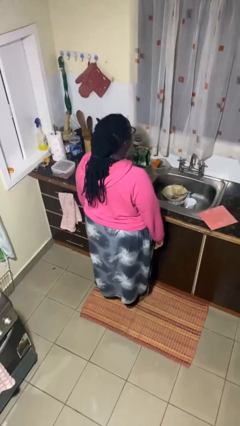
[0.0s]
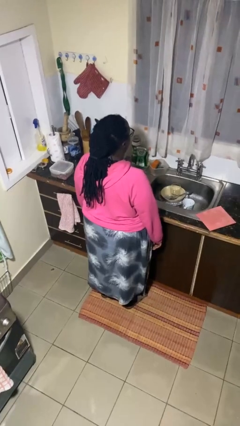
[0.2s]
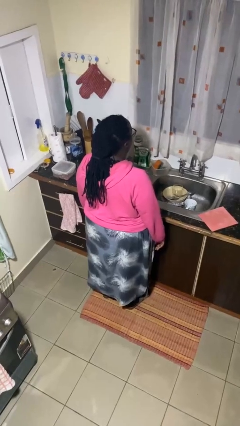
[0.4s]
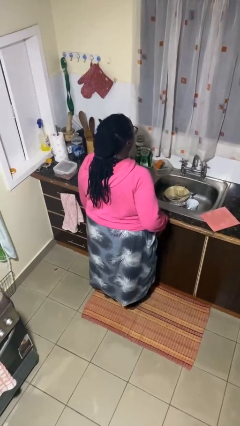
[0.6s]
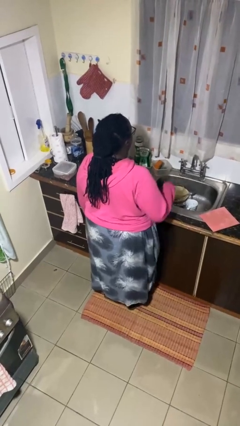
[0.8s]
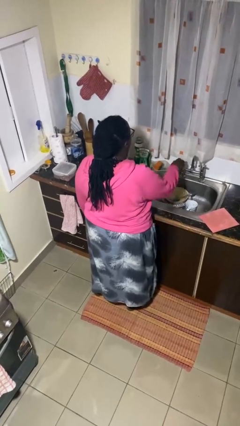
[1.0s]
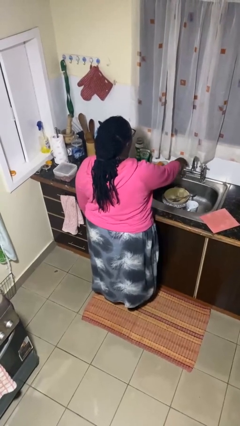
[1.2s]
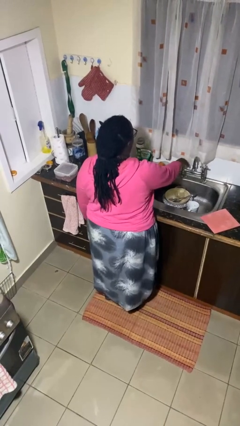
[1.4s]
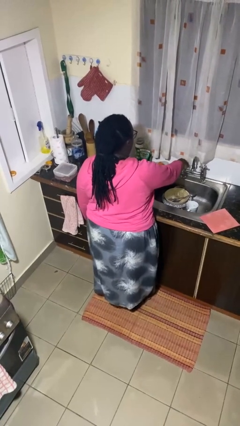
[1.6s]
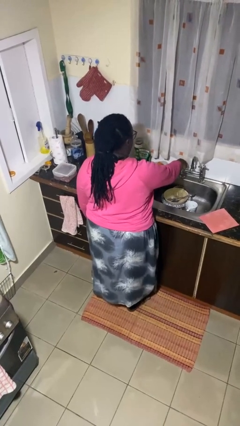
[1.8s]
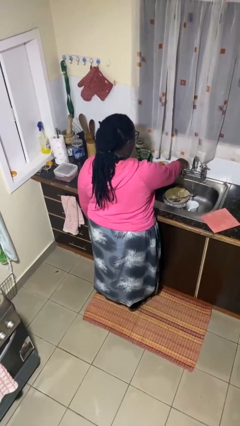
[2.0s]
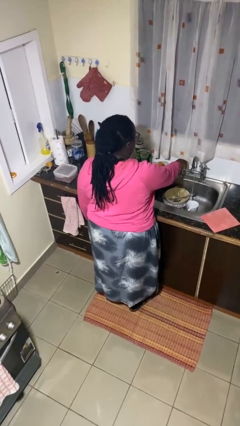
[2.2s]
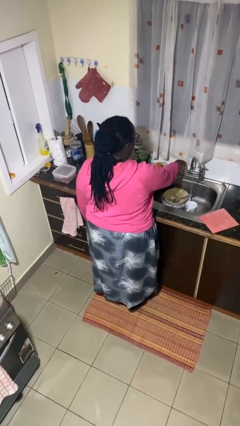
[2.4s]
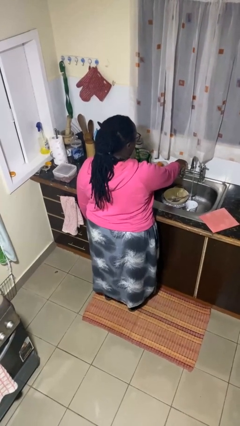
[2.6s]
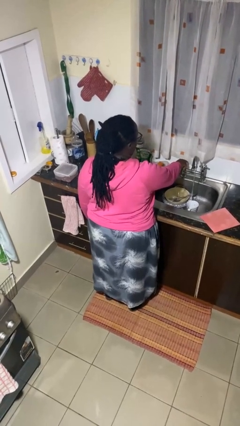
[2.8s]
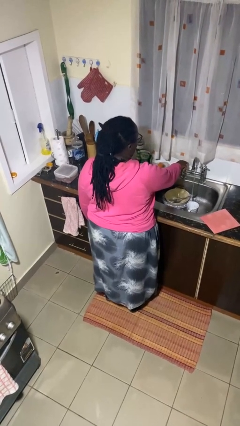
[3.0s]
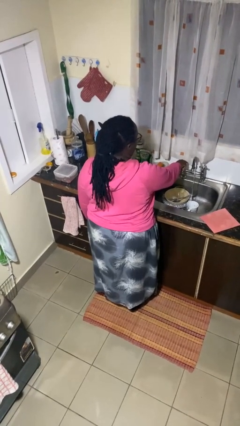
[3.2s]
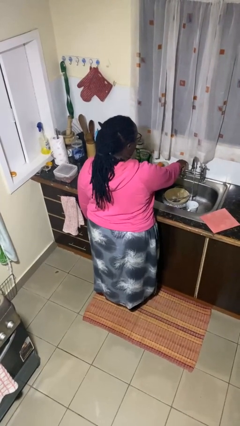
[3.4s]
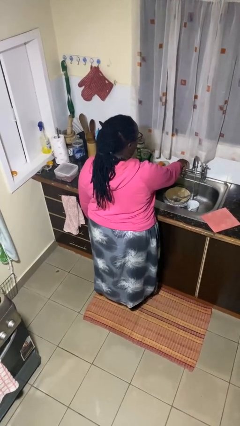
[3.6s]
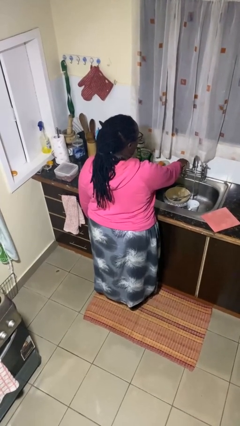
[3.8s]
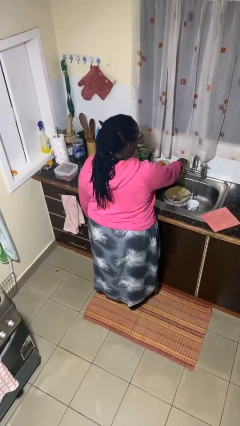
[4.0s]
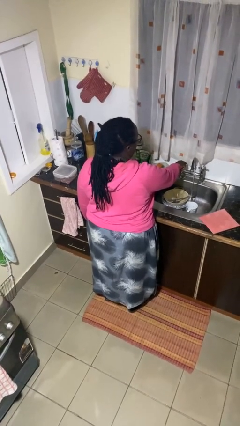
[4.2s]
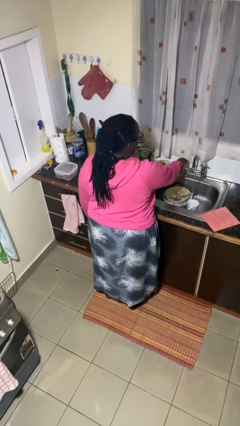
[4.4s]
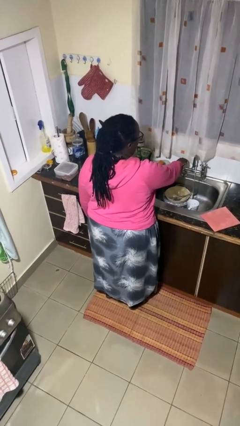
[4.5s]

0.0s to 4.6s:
person turns on faucet

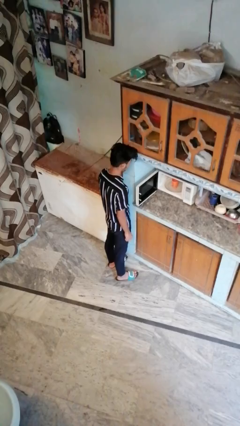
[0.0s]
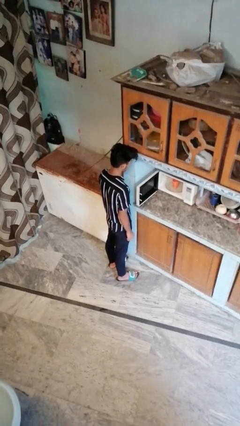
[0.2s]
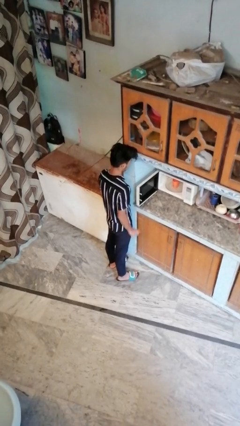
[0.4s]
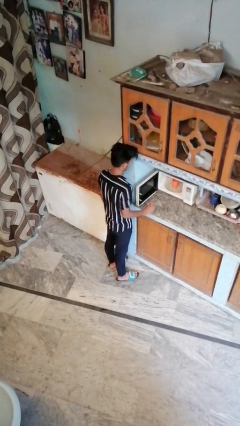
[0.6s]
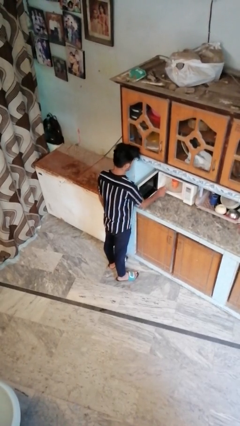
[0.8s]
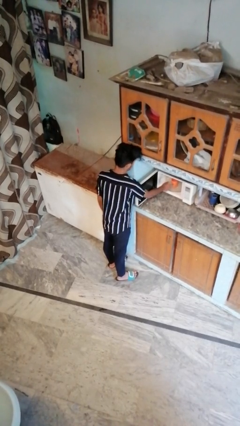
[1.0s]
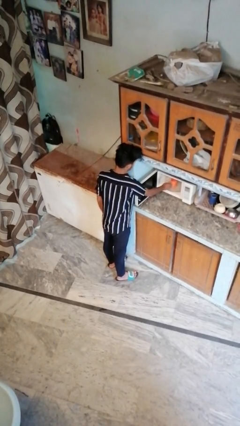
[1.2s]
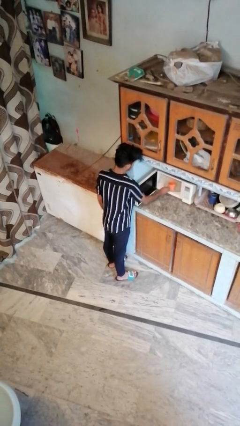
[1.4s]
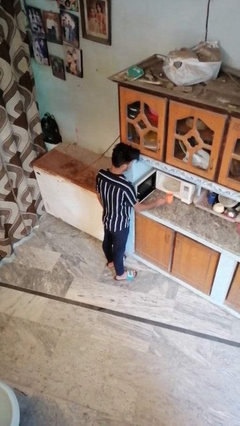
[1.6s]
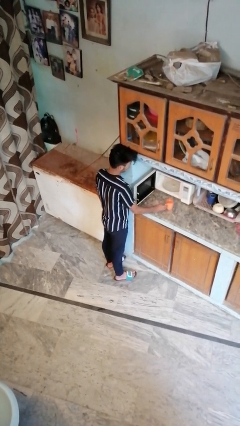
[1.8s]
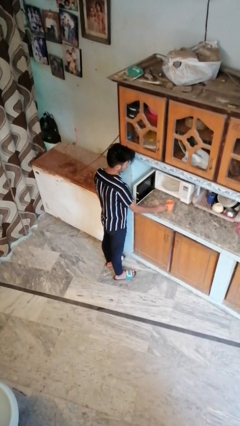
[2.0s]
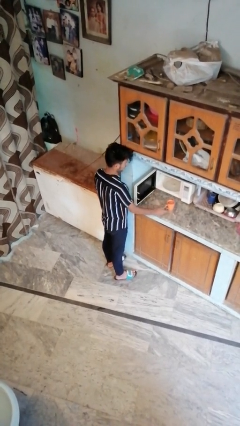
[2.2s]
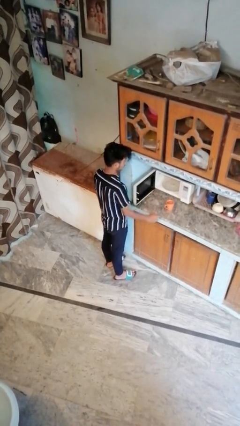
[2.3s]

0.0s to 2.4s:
person takes object from microwave

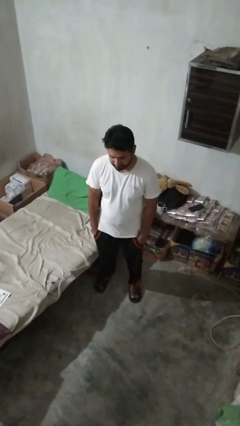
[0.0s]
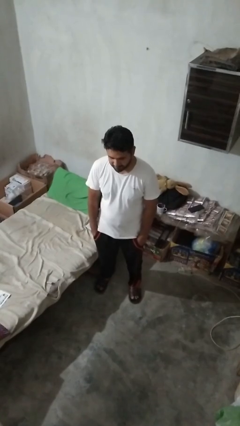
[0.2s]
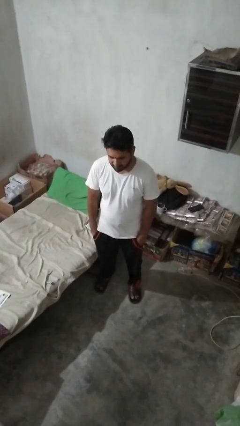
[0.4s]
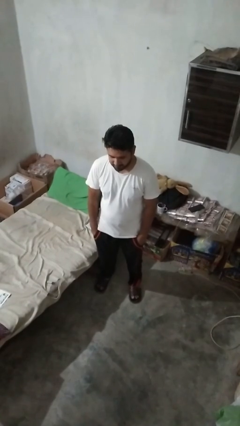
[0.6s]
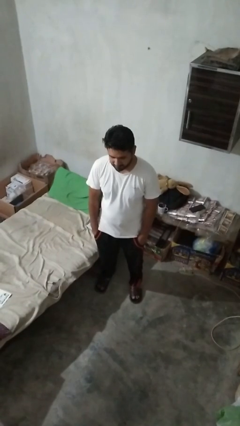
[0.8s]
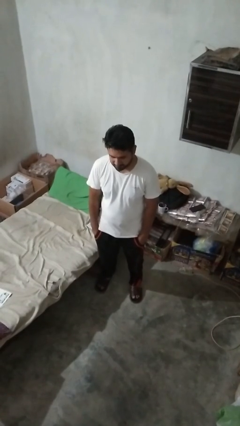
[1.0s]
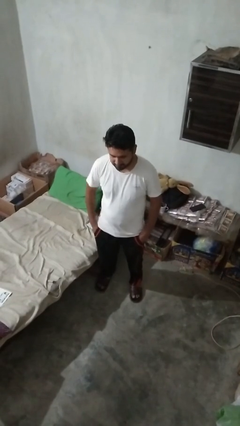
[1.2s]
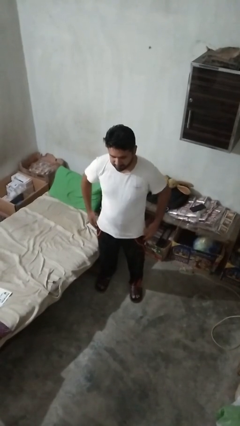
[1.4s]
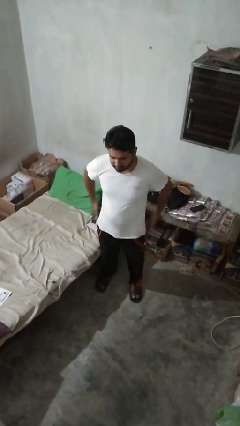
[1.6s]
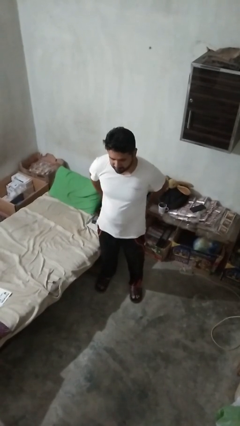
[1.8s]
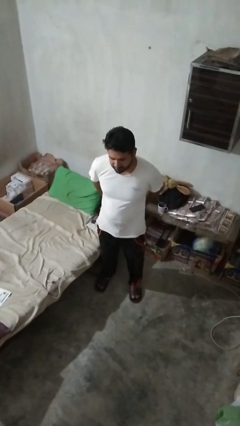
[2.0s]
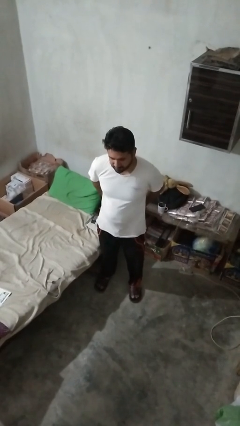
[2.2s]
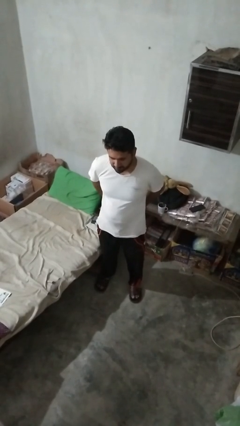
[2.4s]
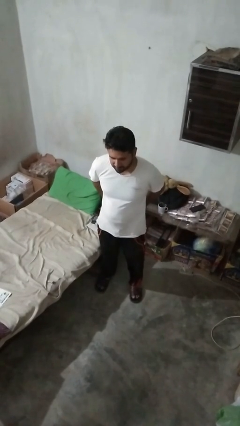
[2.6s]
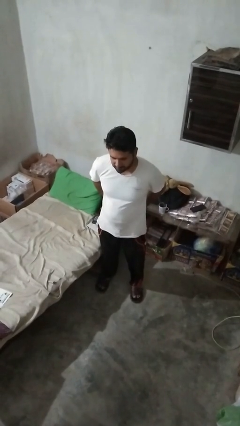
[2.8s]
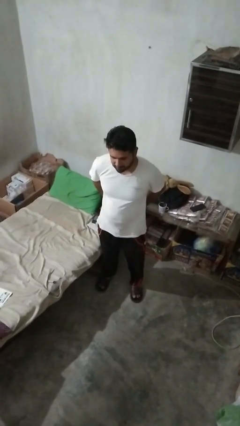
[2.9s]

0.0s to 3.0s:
person puts hands in back pockets

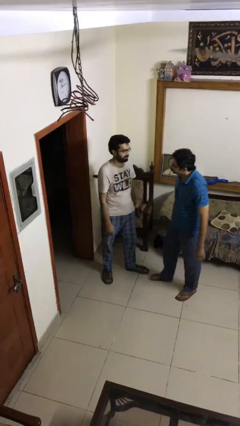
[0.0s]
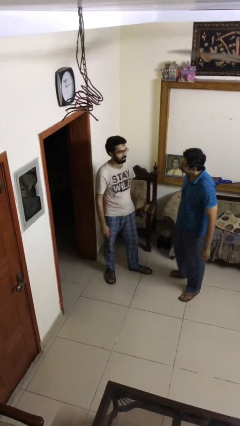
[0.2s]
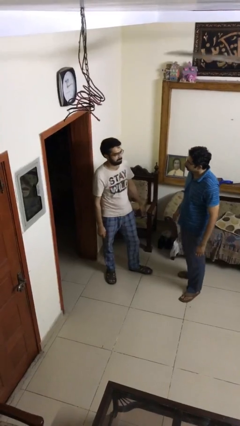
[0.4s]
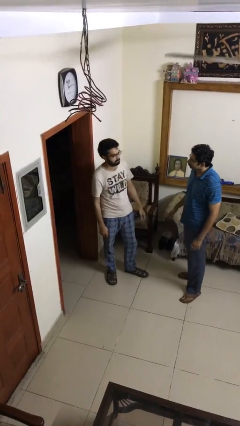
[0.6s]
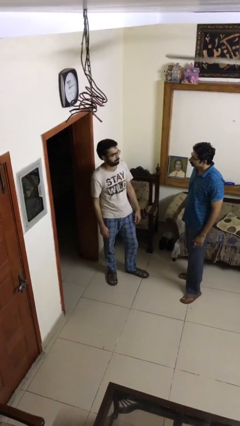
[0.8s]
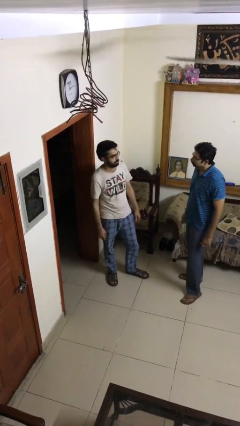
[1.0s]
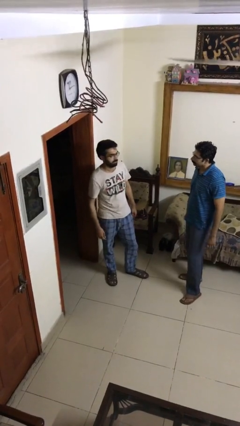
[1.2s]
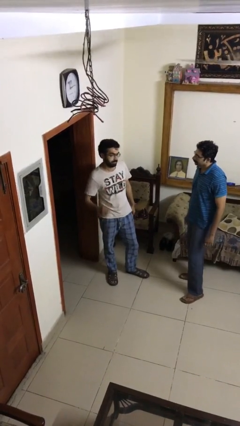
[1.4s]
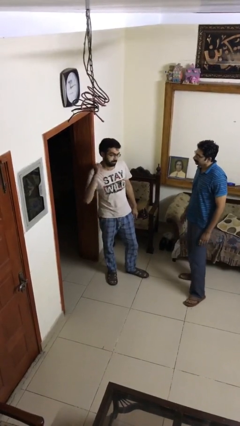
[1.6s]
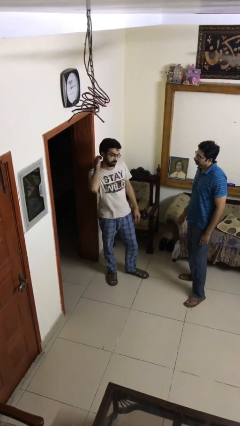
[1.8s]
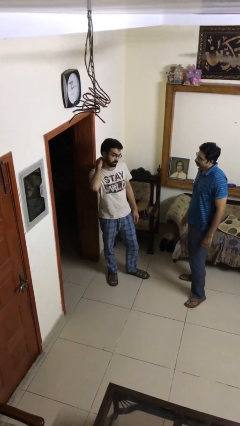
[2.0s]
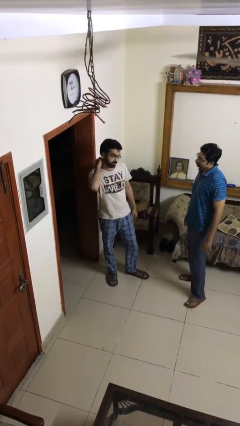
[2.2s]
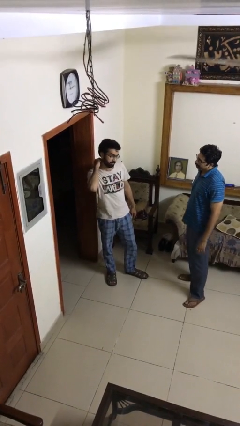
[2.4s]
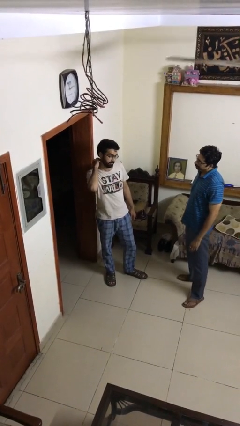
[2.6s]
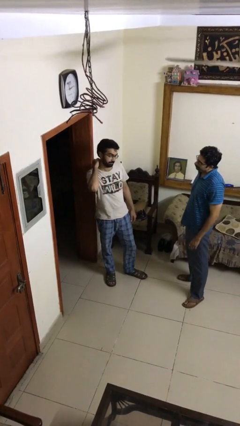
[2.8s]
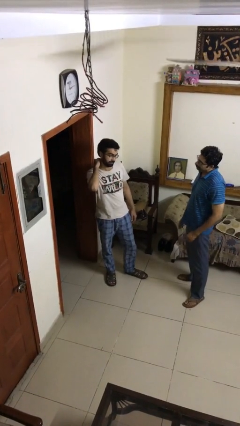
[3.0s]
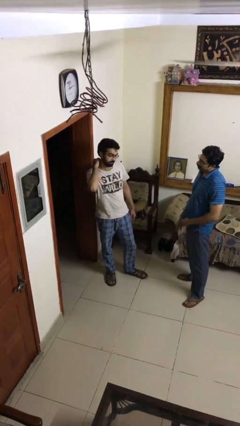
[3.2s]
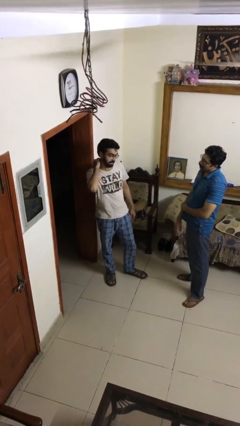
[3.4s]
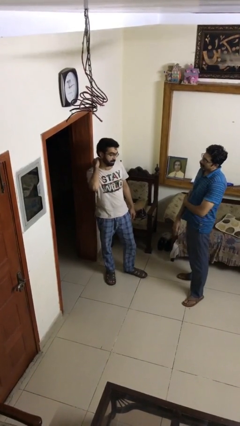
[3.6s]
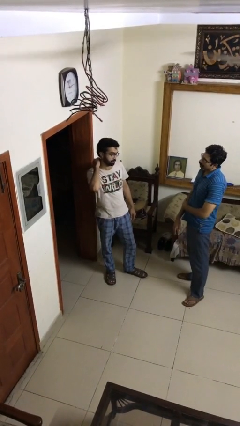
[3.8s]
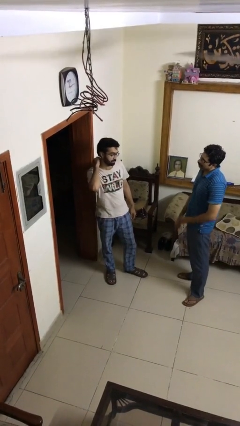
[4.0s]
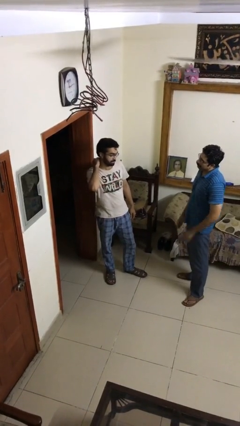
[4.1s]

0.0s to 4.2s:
person talks to person

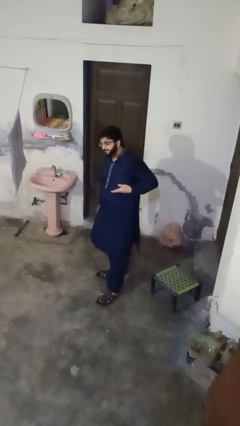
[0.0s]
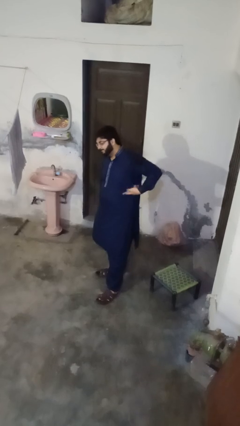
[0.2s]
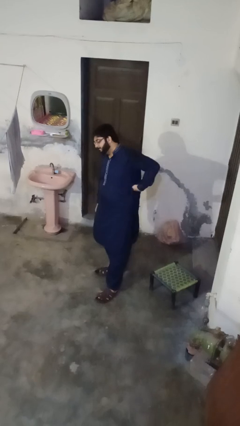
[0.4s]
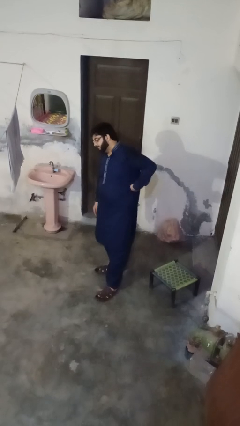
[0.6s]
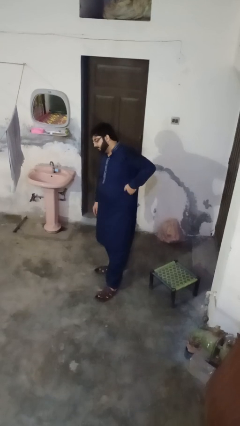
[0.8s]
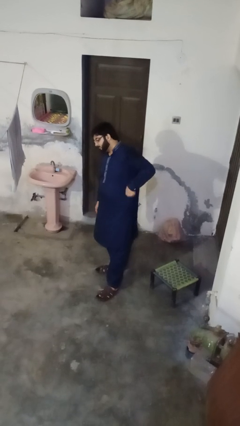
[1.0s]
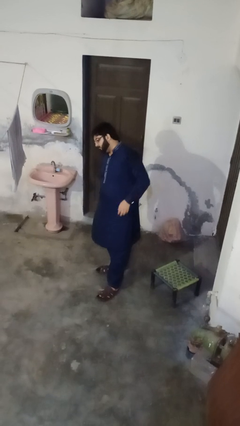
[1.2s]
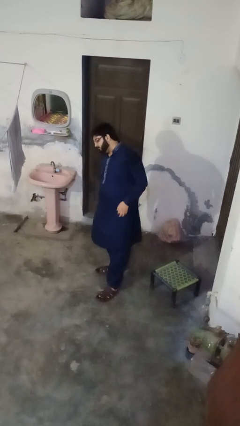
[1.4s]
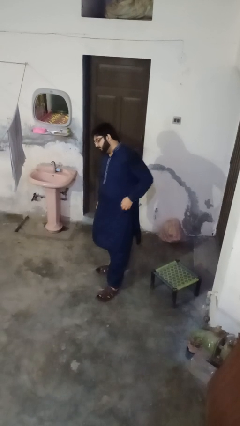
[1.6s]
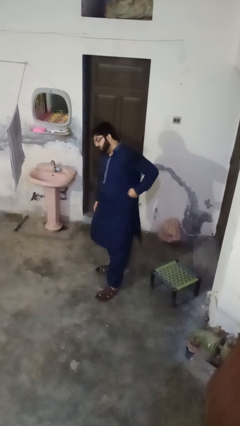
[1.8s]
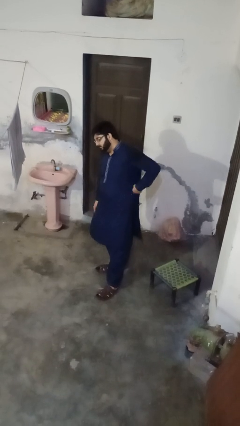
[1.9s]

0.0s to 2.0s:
person puts phone into pocket

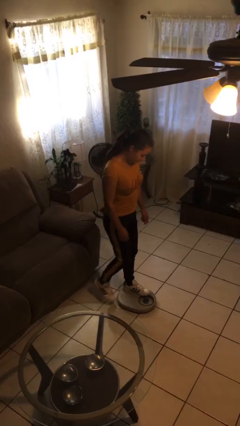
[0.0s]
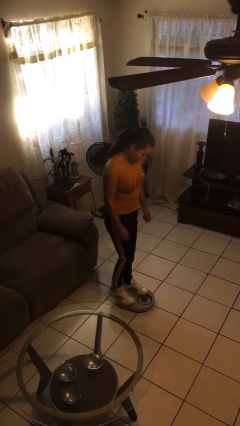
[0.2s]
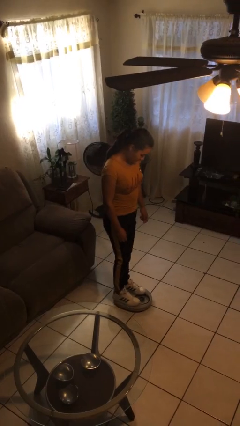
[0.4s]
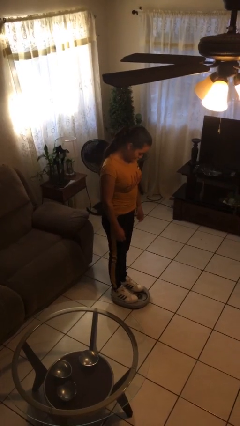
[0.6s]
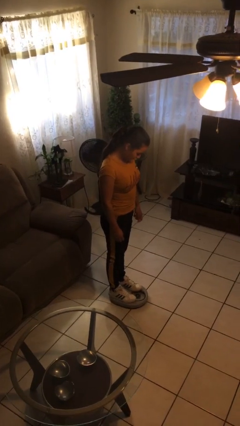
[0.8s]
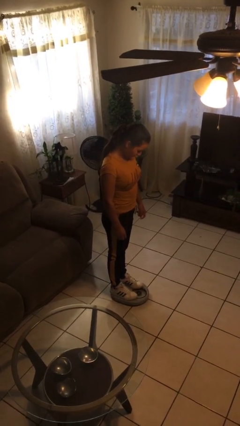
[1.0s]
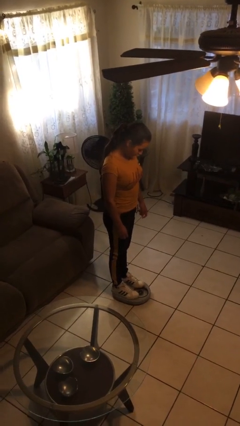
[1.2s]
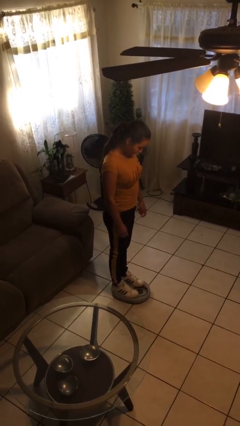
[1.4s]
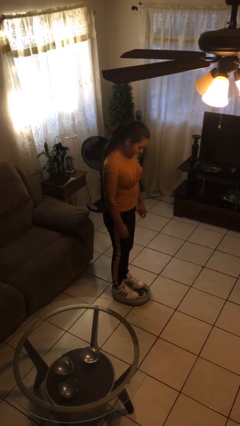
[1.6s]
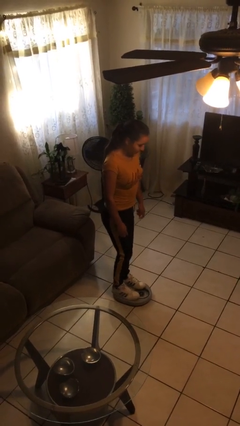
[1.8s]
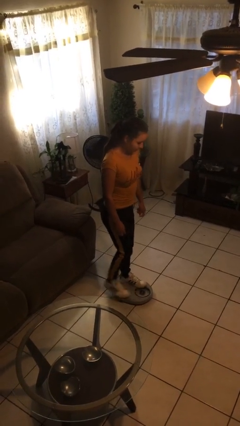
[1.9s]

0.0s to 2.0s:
person uses bodyweight scale
